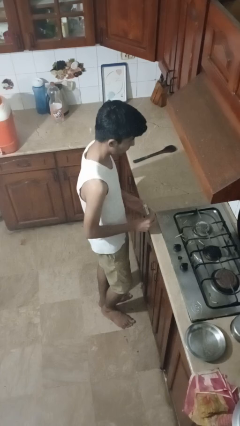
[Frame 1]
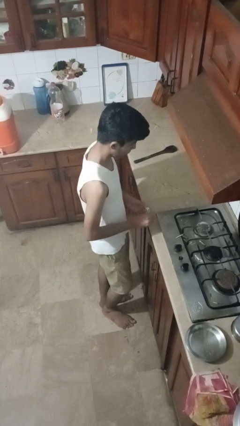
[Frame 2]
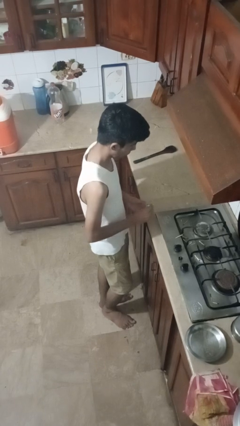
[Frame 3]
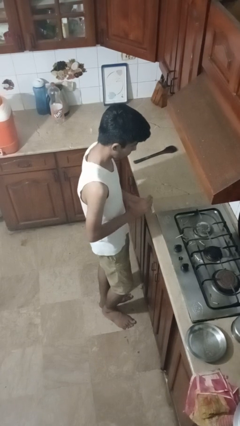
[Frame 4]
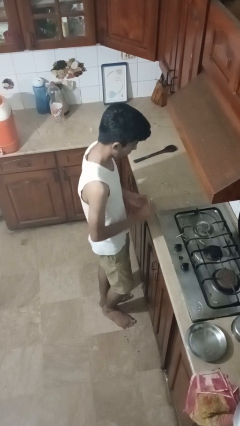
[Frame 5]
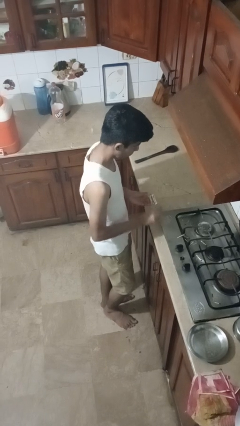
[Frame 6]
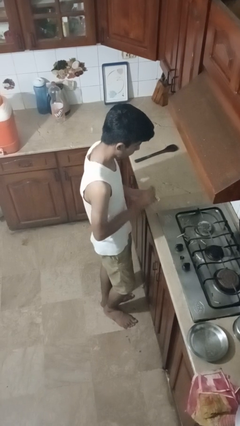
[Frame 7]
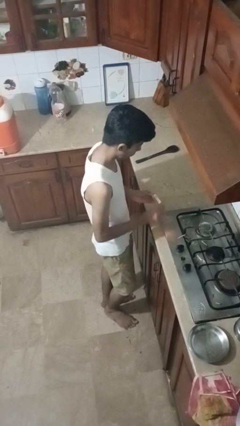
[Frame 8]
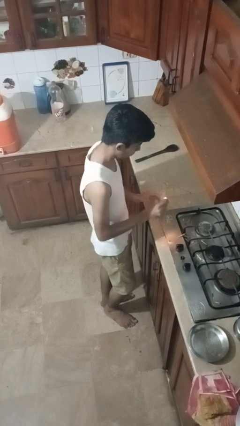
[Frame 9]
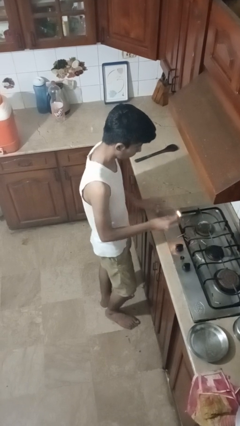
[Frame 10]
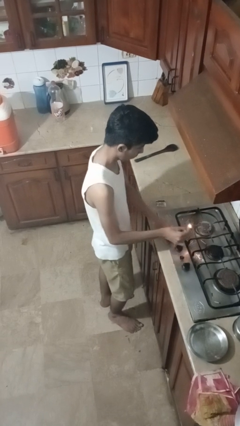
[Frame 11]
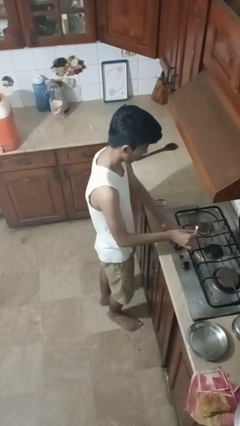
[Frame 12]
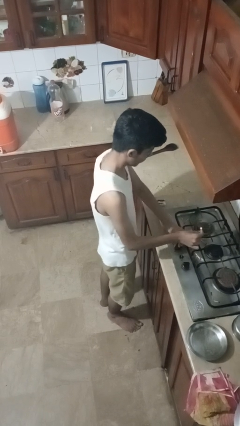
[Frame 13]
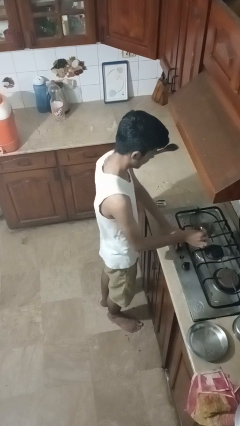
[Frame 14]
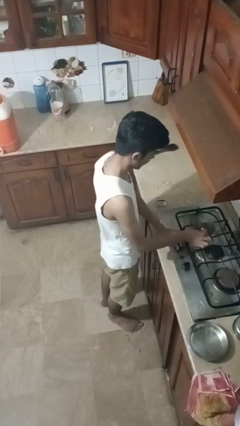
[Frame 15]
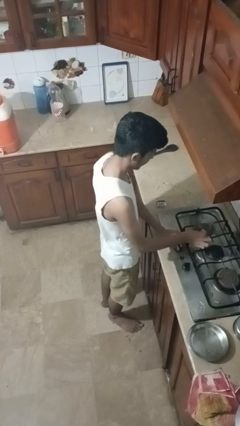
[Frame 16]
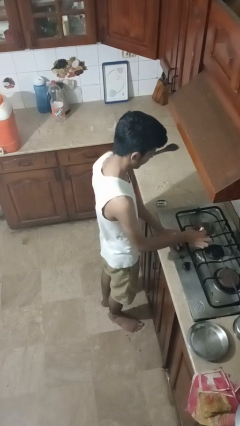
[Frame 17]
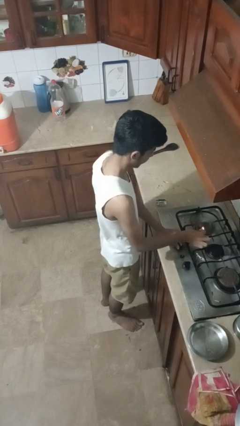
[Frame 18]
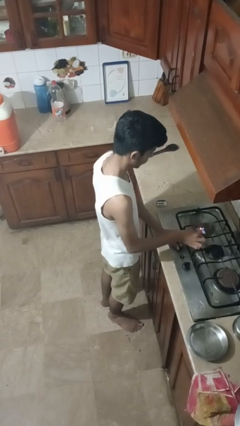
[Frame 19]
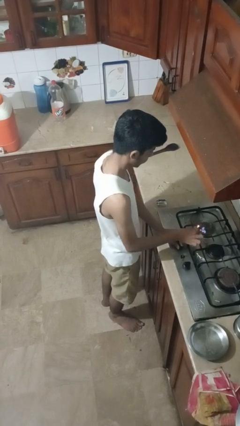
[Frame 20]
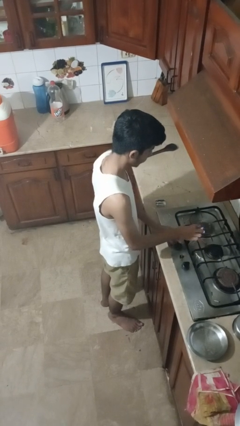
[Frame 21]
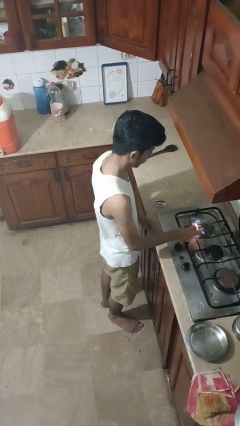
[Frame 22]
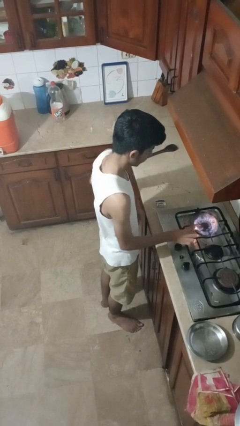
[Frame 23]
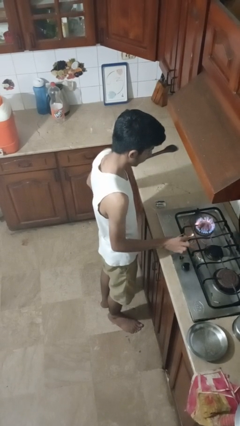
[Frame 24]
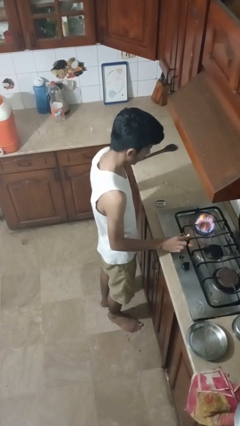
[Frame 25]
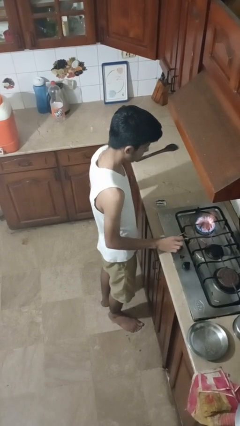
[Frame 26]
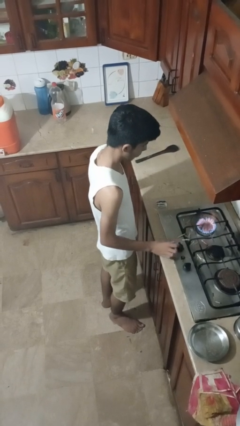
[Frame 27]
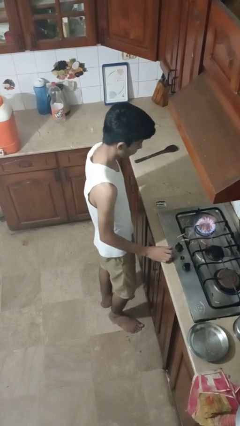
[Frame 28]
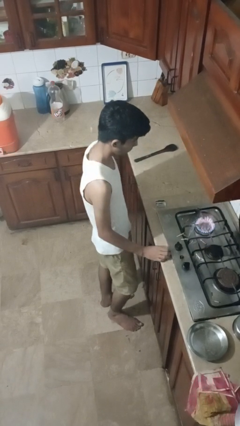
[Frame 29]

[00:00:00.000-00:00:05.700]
person turns on stovetop

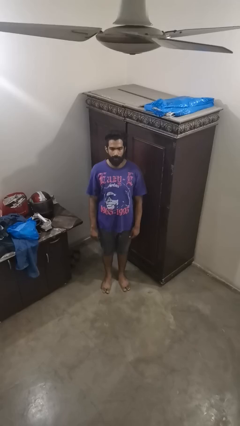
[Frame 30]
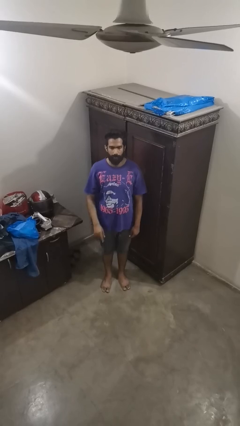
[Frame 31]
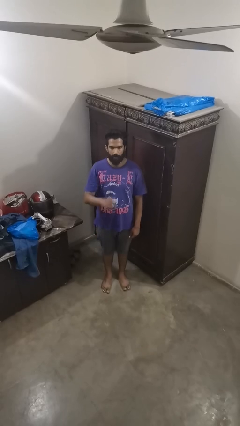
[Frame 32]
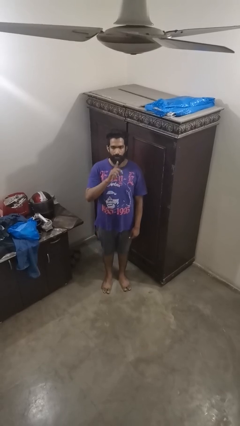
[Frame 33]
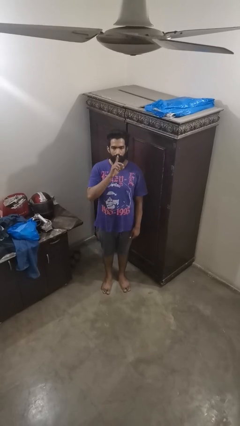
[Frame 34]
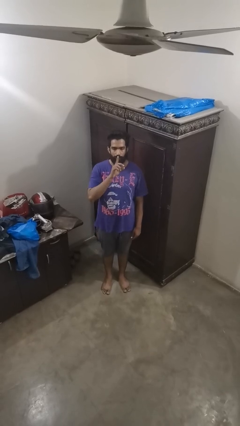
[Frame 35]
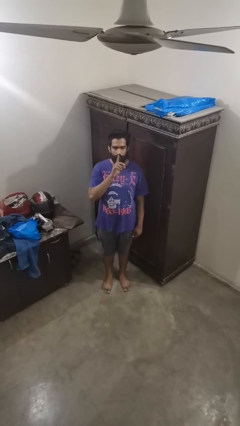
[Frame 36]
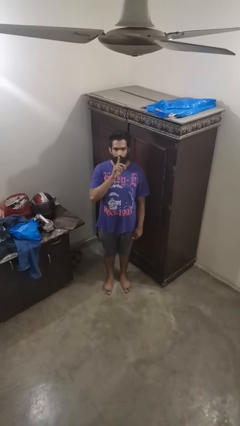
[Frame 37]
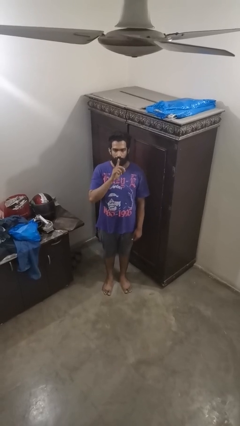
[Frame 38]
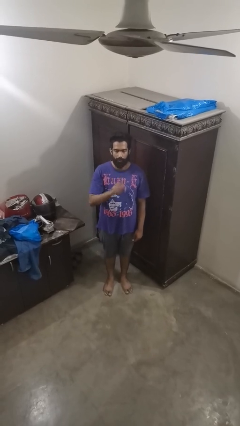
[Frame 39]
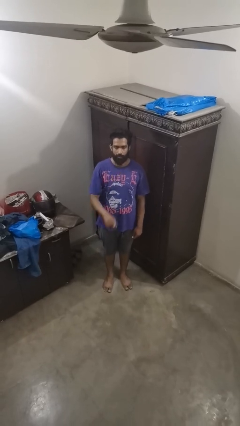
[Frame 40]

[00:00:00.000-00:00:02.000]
person gestures be quiet

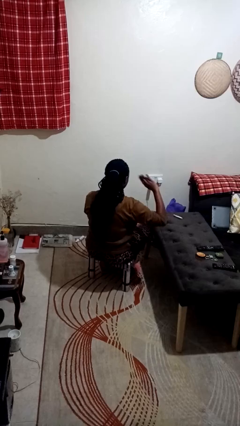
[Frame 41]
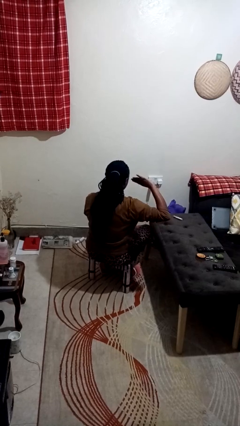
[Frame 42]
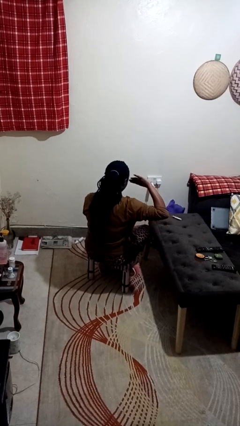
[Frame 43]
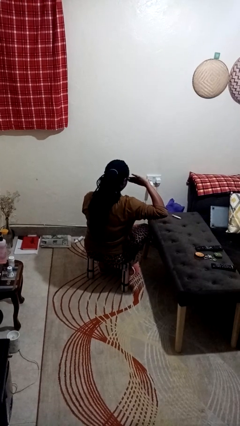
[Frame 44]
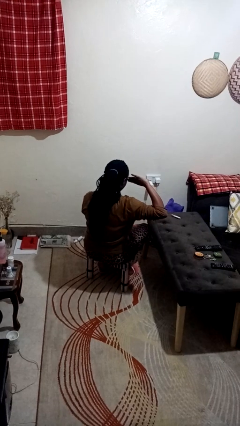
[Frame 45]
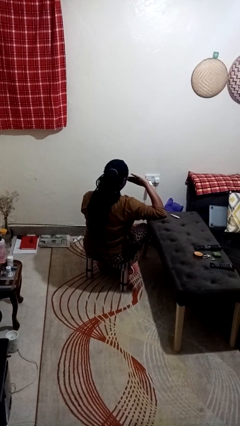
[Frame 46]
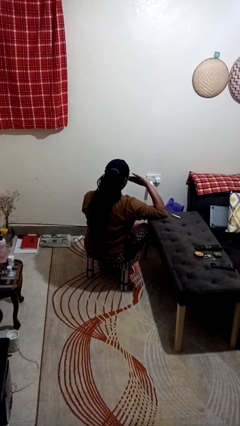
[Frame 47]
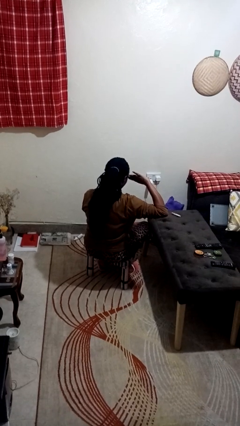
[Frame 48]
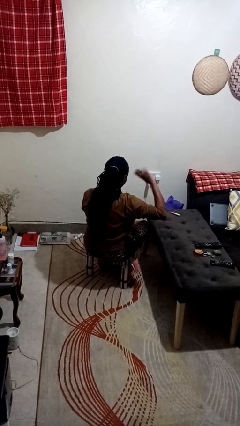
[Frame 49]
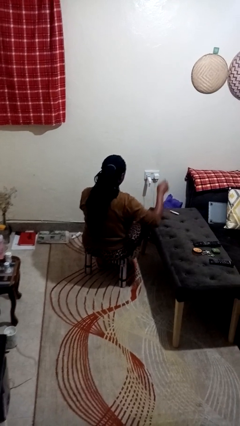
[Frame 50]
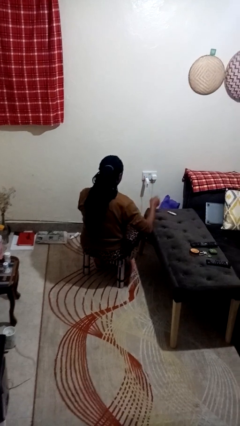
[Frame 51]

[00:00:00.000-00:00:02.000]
person salutes

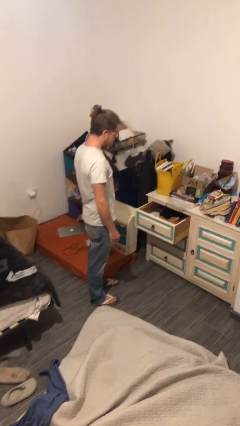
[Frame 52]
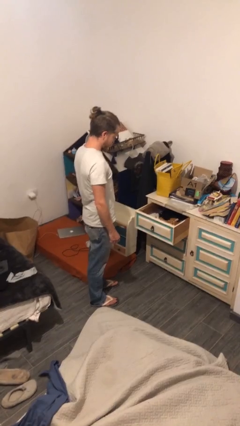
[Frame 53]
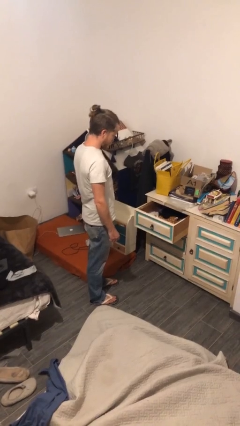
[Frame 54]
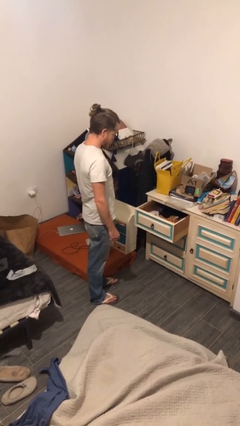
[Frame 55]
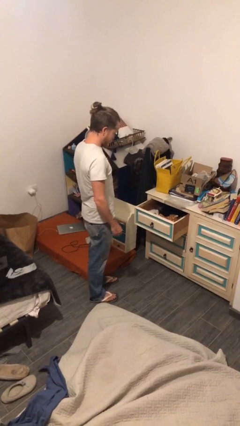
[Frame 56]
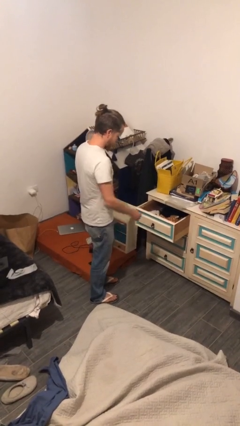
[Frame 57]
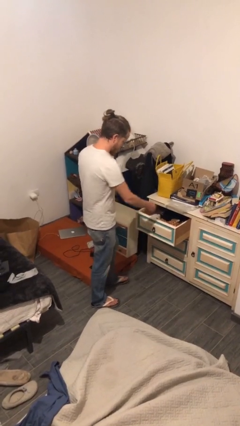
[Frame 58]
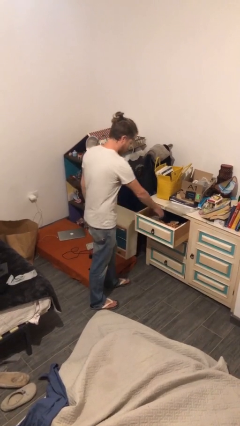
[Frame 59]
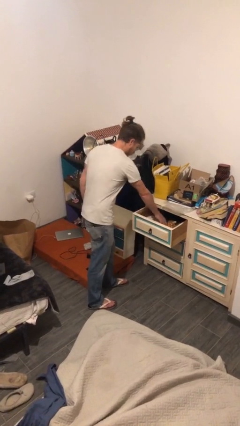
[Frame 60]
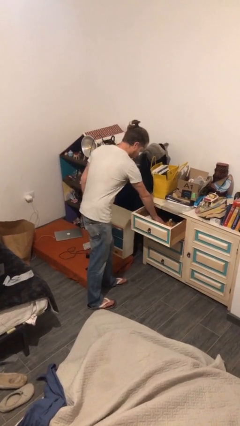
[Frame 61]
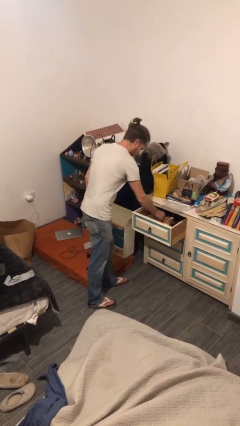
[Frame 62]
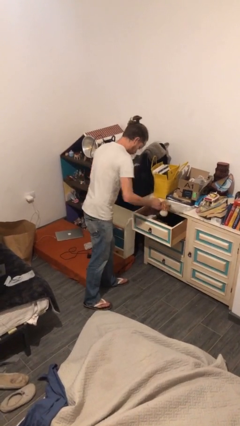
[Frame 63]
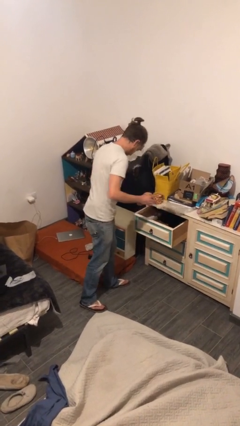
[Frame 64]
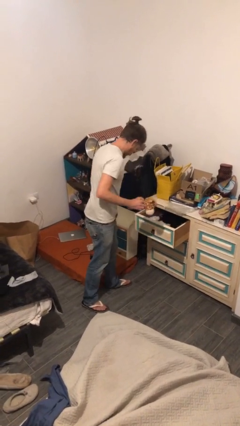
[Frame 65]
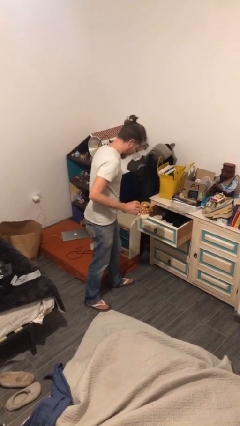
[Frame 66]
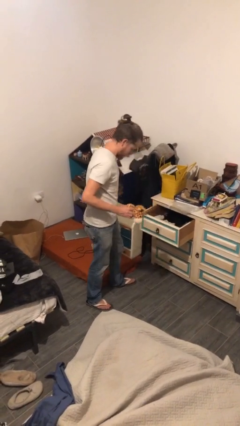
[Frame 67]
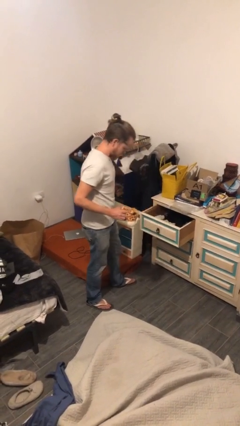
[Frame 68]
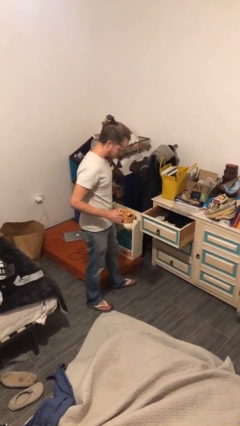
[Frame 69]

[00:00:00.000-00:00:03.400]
person picks up object from cabinet

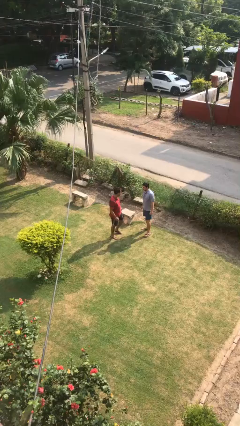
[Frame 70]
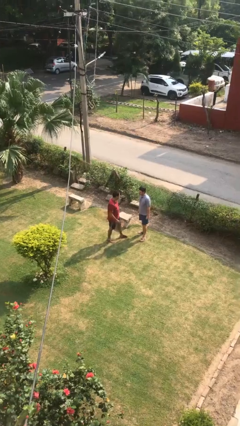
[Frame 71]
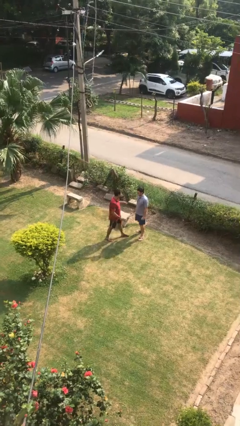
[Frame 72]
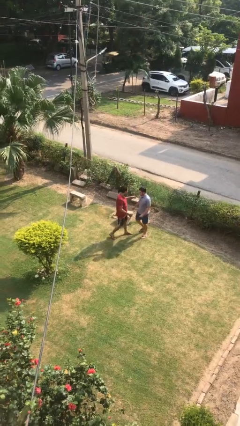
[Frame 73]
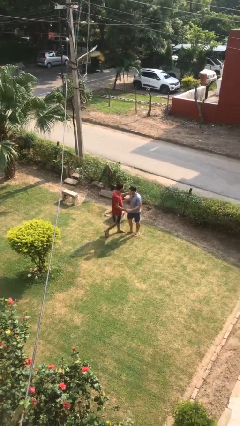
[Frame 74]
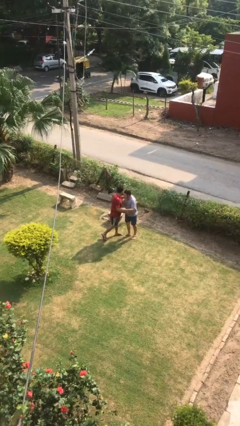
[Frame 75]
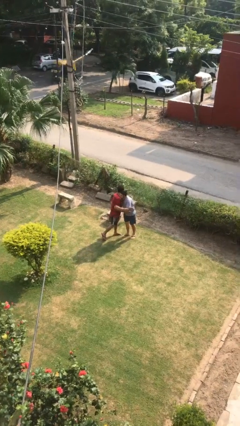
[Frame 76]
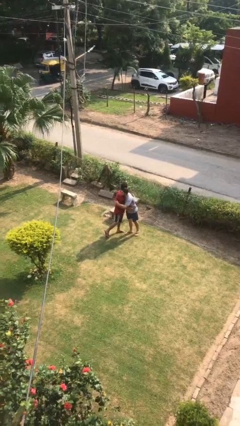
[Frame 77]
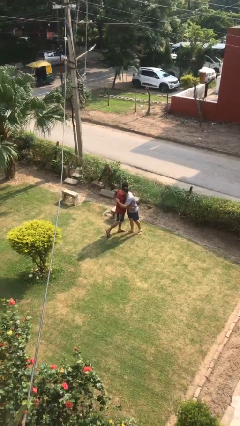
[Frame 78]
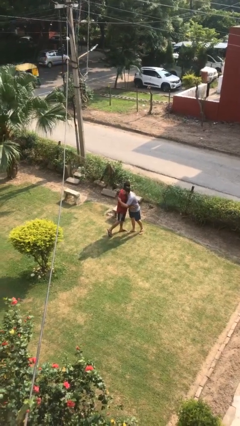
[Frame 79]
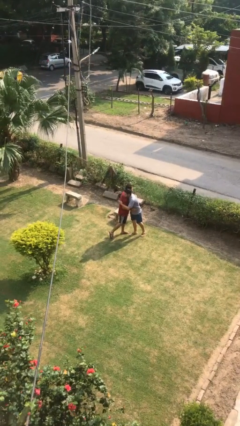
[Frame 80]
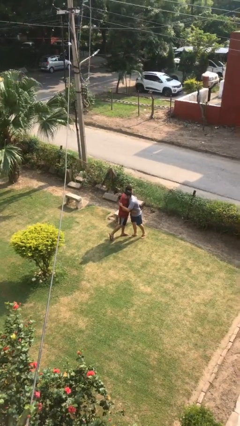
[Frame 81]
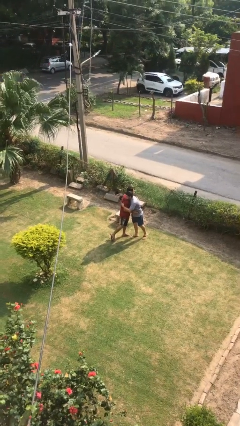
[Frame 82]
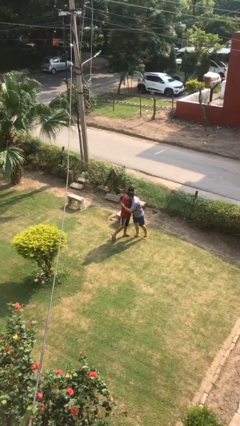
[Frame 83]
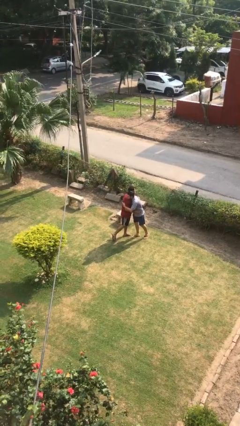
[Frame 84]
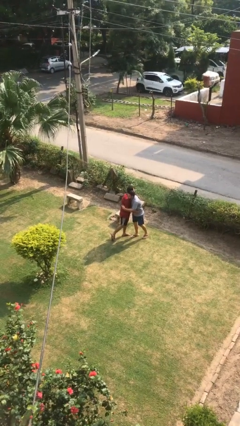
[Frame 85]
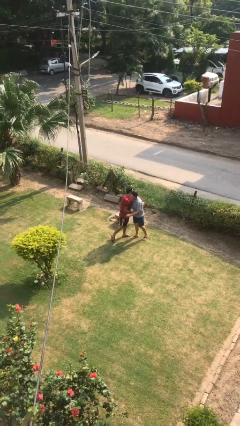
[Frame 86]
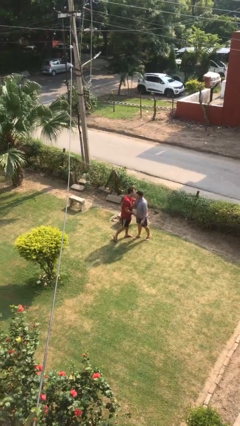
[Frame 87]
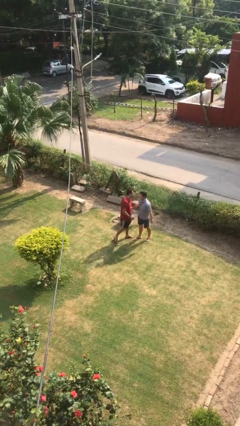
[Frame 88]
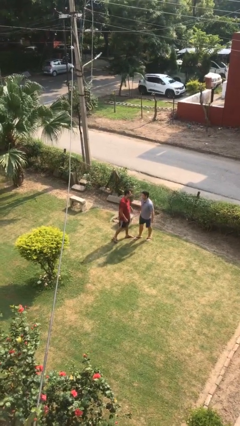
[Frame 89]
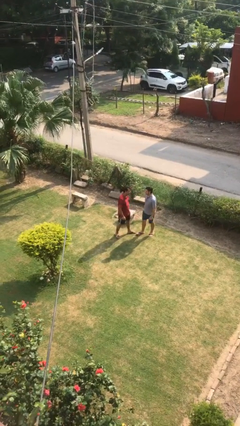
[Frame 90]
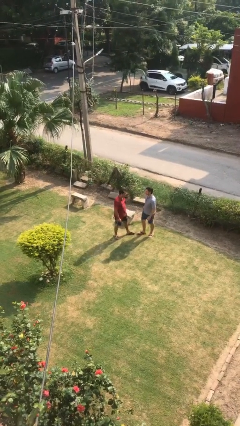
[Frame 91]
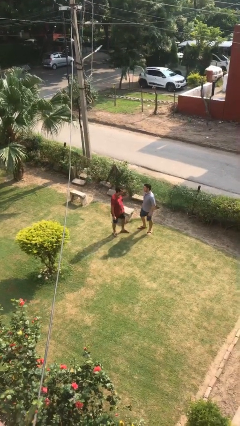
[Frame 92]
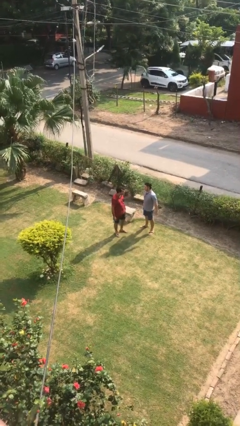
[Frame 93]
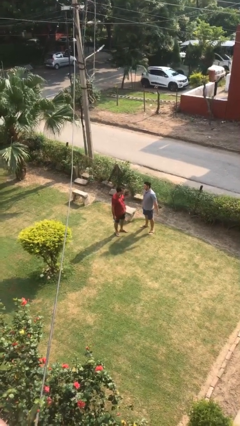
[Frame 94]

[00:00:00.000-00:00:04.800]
person embraces person
